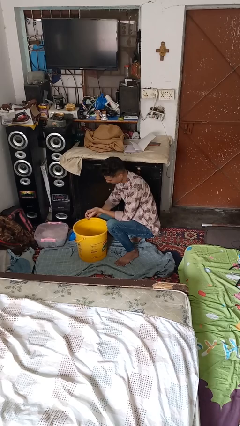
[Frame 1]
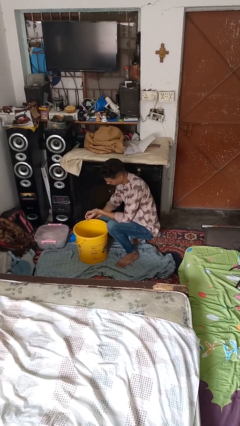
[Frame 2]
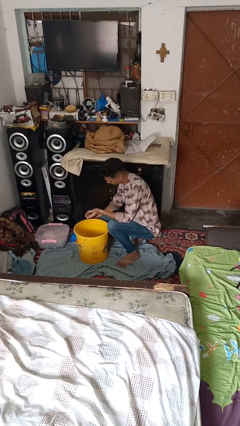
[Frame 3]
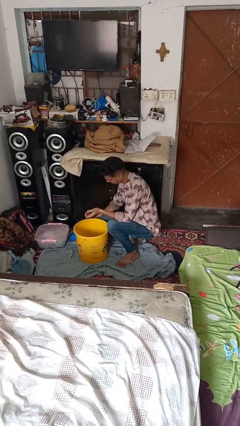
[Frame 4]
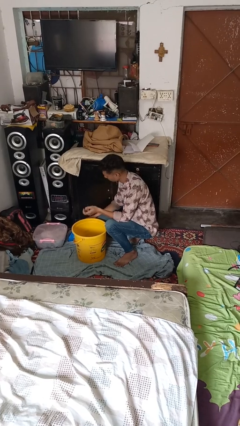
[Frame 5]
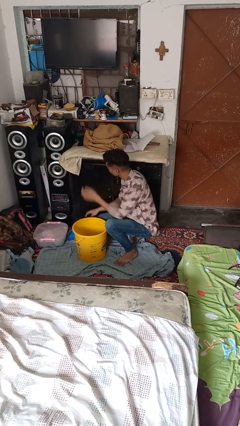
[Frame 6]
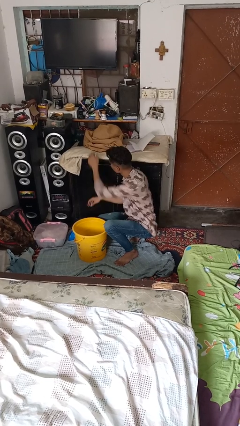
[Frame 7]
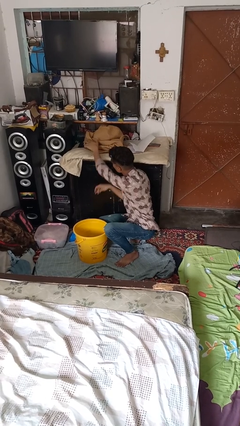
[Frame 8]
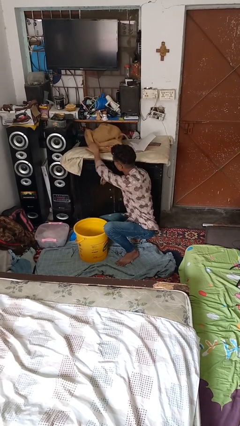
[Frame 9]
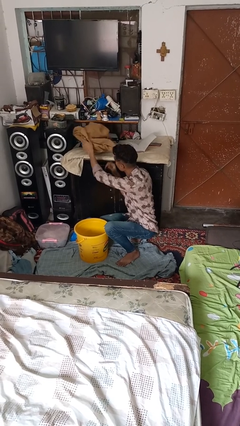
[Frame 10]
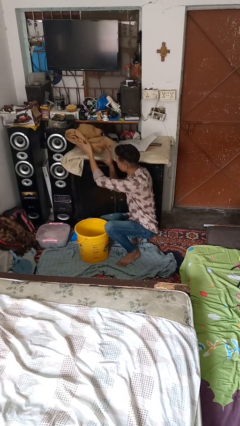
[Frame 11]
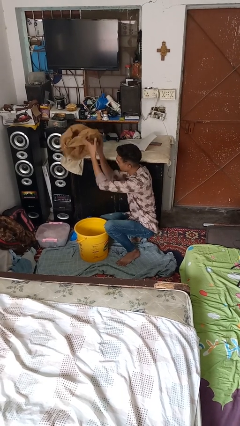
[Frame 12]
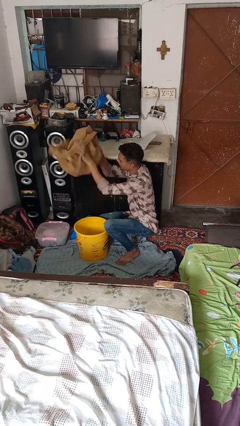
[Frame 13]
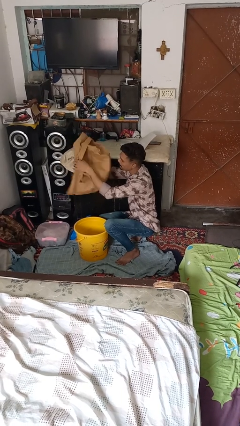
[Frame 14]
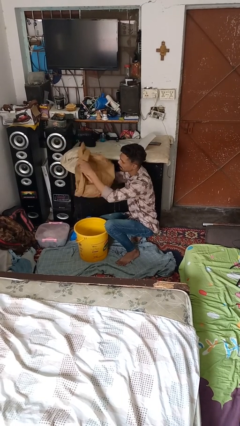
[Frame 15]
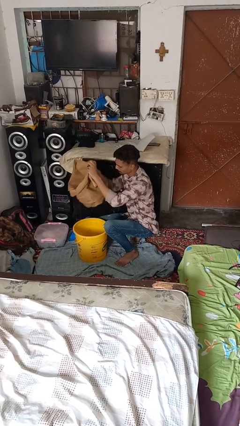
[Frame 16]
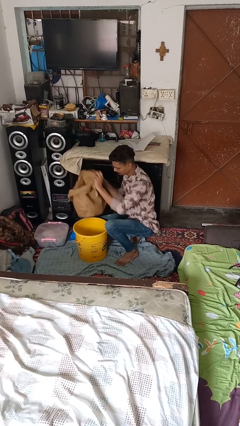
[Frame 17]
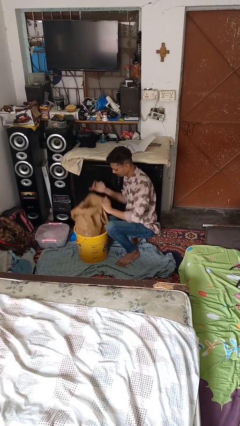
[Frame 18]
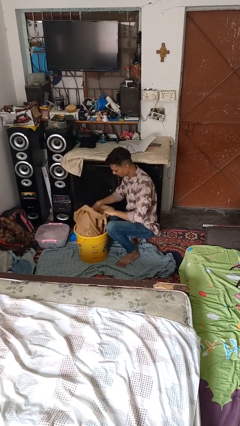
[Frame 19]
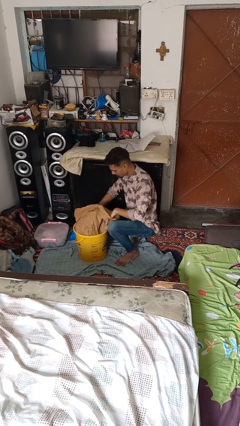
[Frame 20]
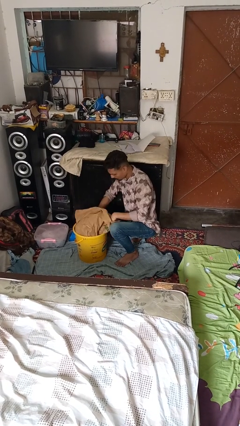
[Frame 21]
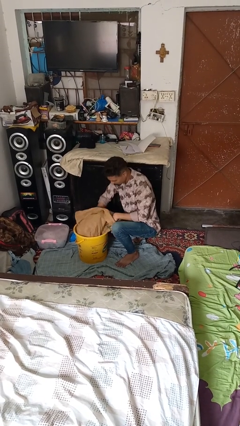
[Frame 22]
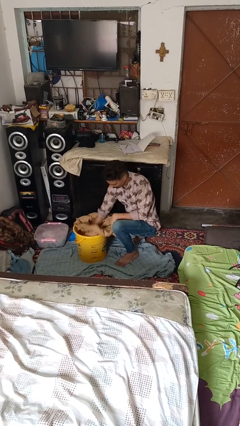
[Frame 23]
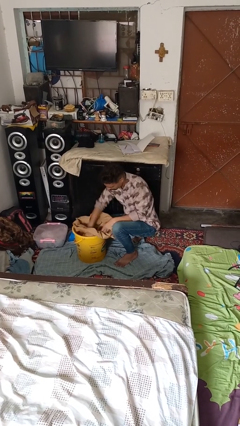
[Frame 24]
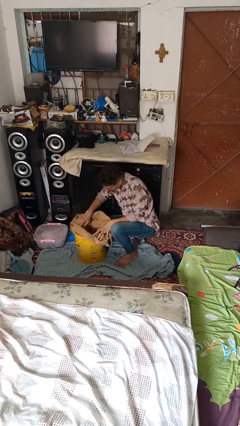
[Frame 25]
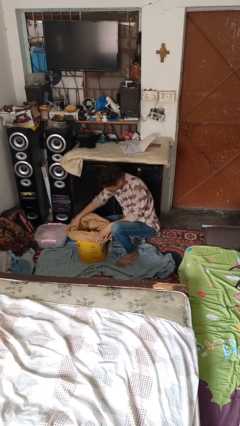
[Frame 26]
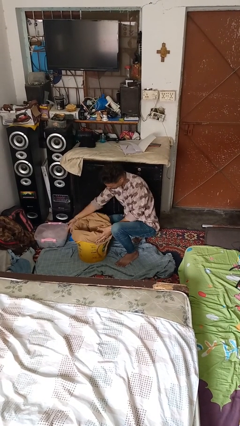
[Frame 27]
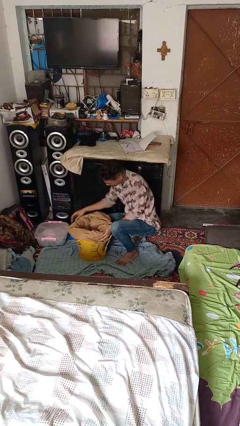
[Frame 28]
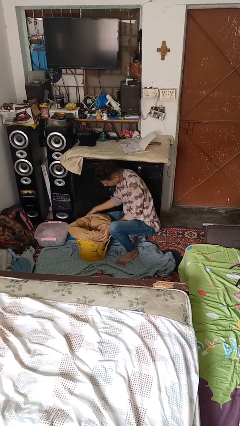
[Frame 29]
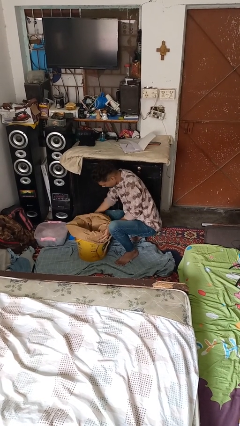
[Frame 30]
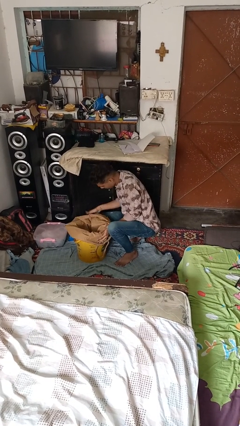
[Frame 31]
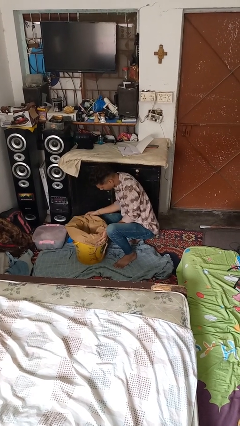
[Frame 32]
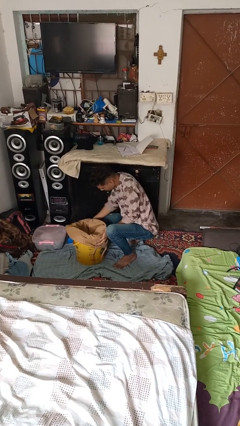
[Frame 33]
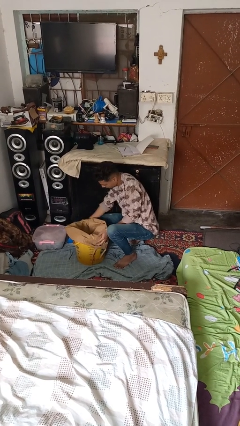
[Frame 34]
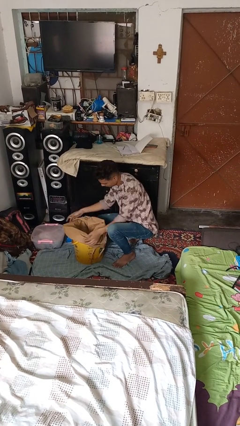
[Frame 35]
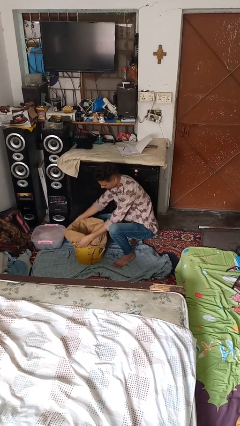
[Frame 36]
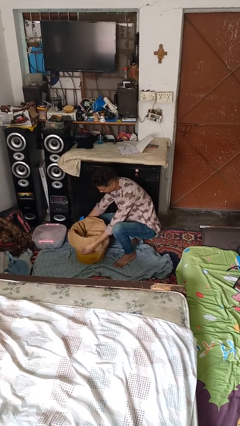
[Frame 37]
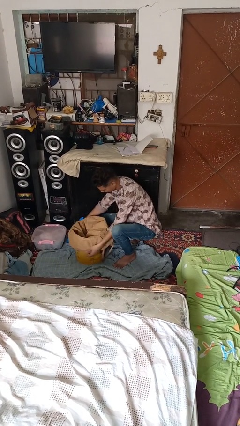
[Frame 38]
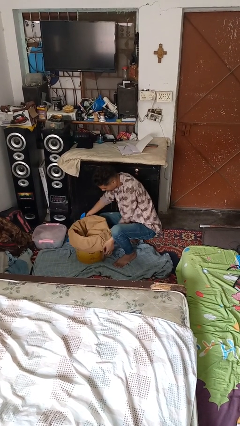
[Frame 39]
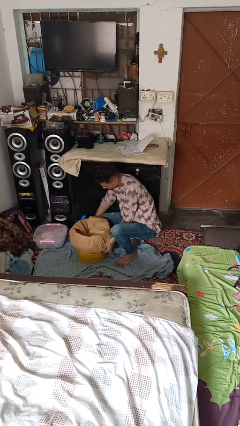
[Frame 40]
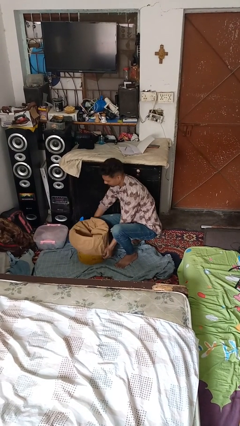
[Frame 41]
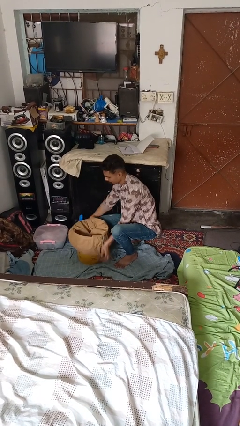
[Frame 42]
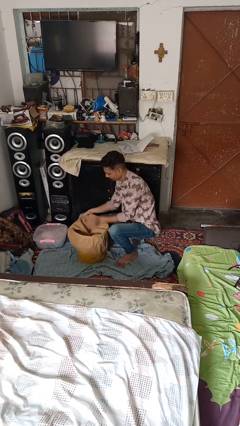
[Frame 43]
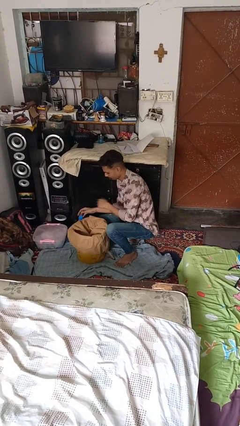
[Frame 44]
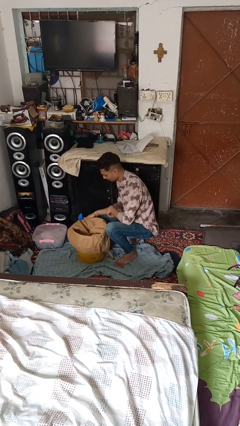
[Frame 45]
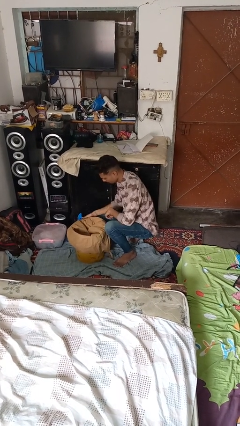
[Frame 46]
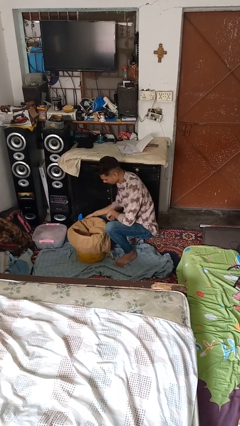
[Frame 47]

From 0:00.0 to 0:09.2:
person inserts trashbag into trashcan

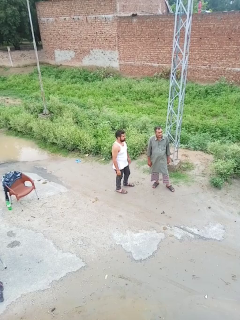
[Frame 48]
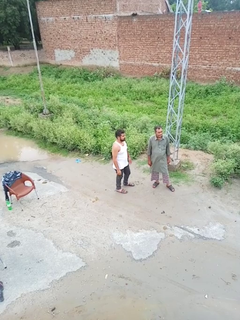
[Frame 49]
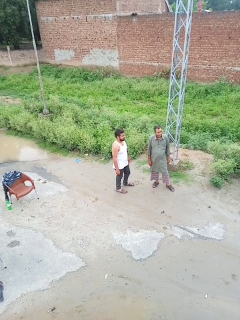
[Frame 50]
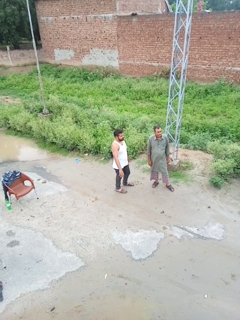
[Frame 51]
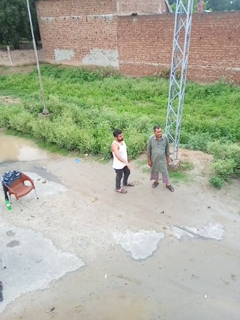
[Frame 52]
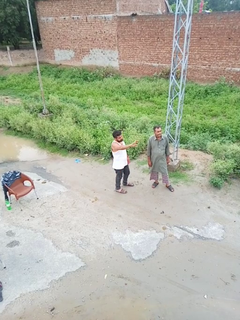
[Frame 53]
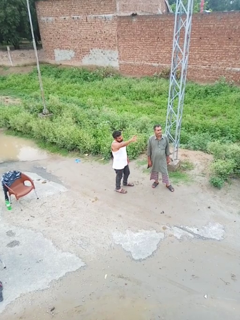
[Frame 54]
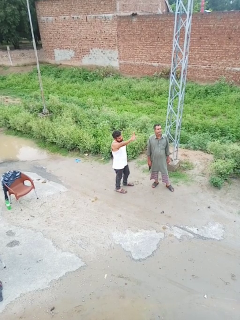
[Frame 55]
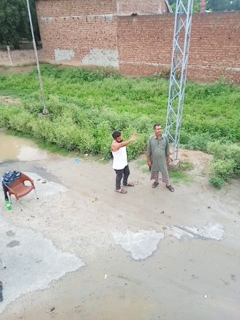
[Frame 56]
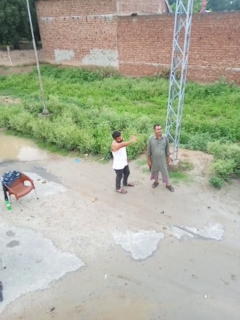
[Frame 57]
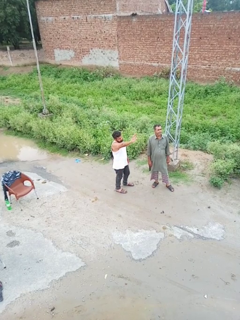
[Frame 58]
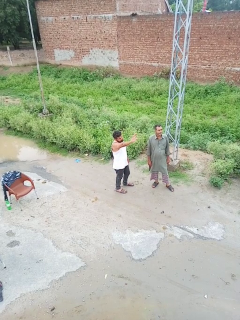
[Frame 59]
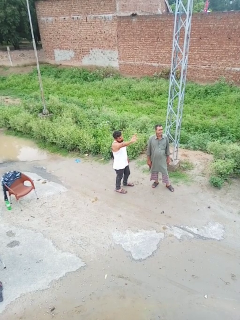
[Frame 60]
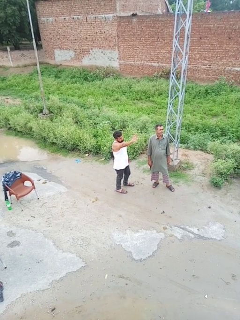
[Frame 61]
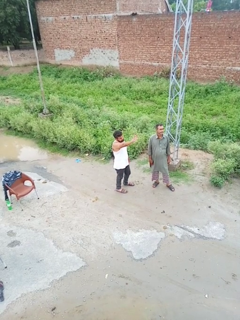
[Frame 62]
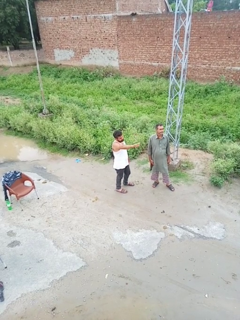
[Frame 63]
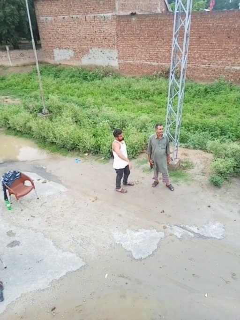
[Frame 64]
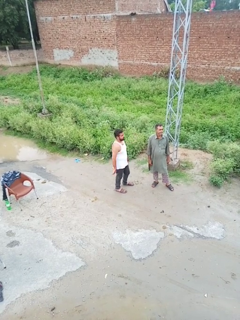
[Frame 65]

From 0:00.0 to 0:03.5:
person waves at person

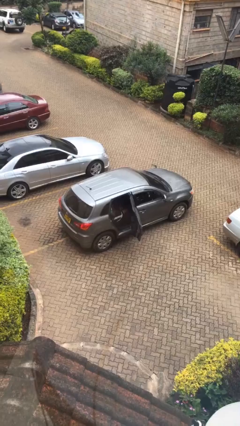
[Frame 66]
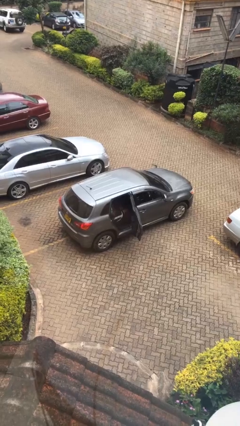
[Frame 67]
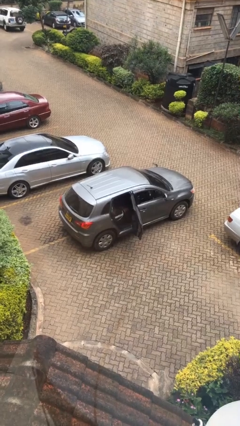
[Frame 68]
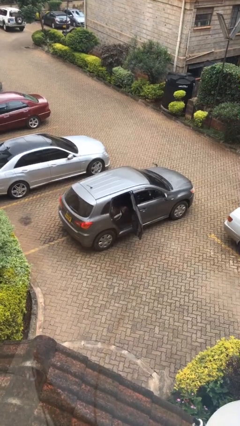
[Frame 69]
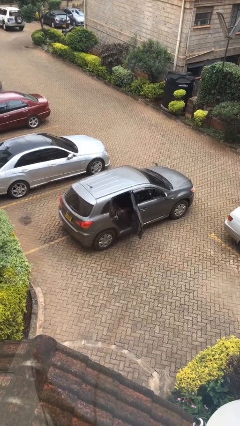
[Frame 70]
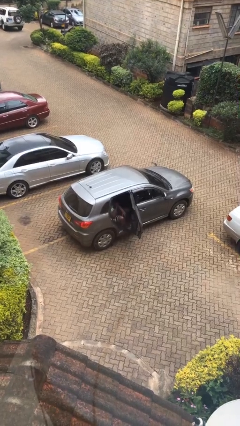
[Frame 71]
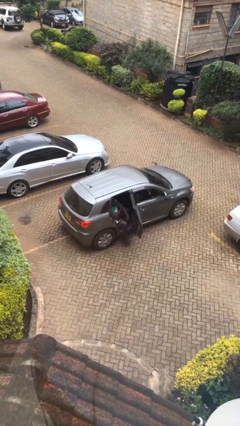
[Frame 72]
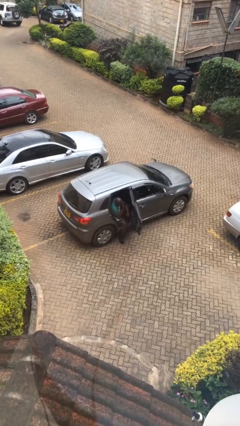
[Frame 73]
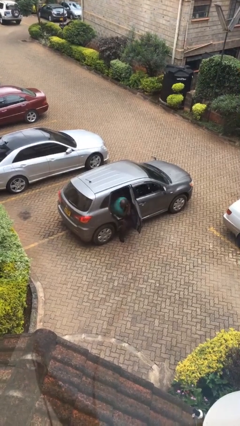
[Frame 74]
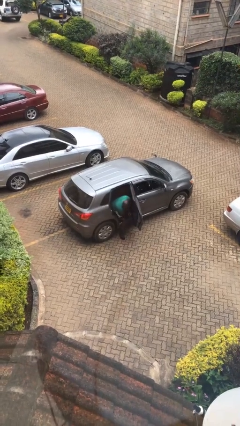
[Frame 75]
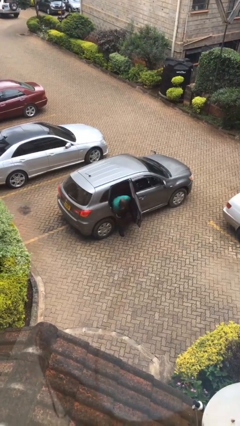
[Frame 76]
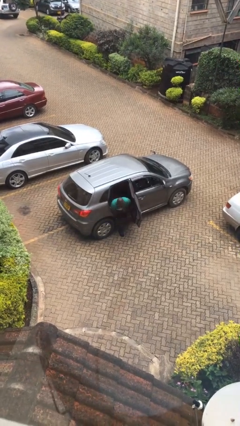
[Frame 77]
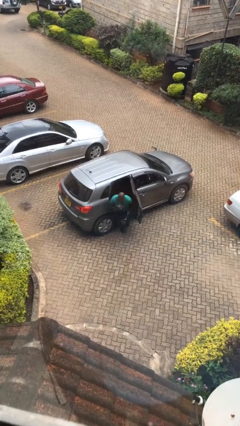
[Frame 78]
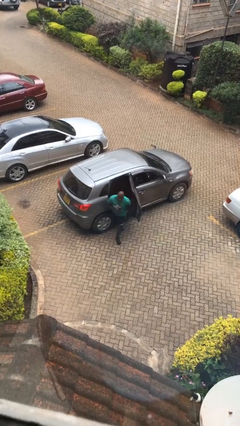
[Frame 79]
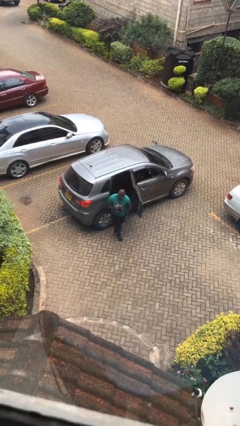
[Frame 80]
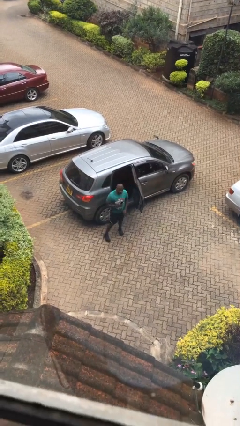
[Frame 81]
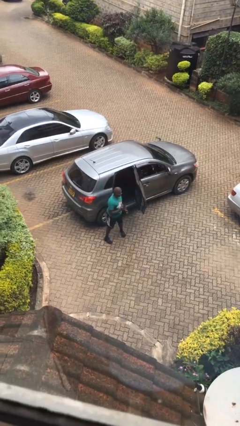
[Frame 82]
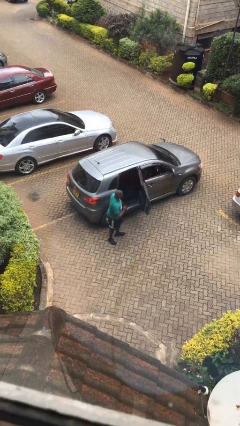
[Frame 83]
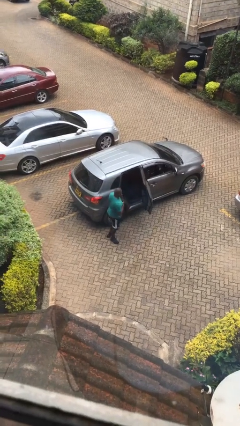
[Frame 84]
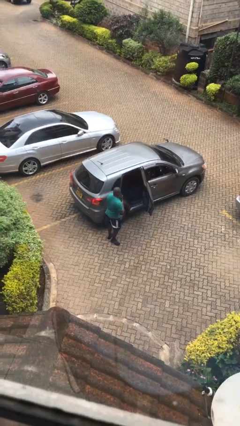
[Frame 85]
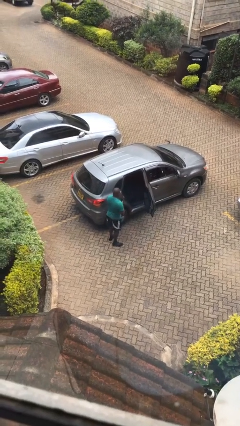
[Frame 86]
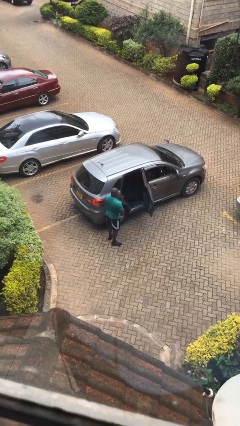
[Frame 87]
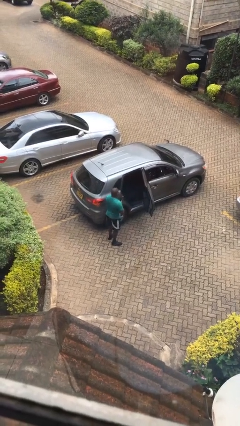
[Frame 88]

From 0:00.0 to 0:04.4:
person exits car

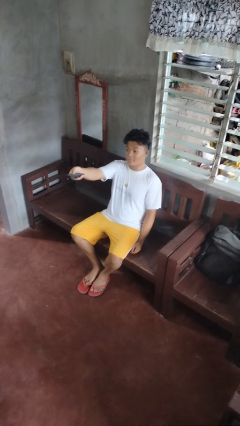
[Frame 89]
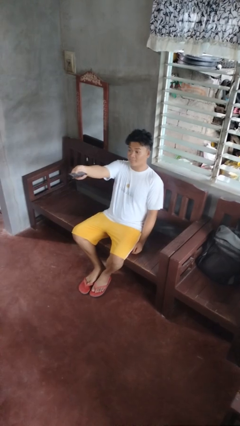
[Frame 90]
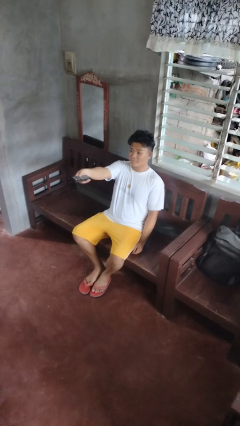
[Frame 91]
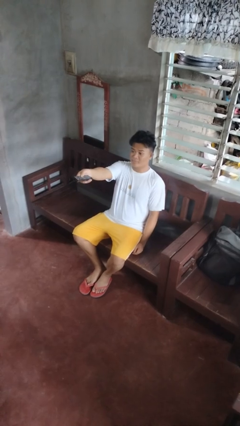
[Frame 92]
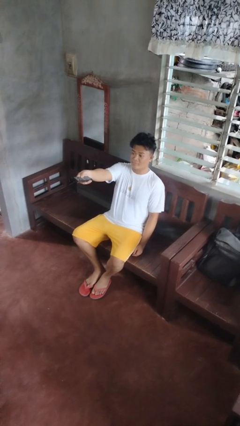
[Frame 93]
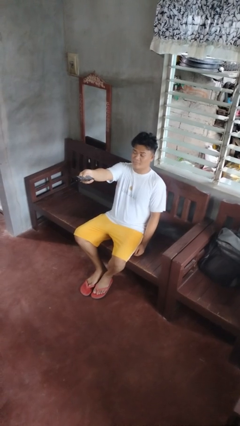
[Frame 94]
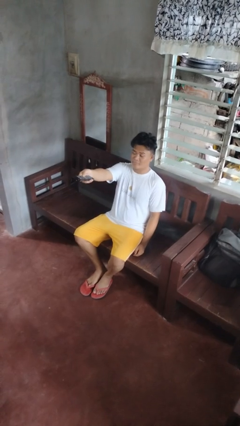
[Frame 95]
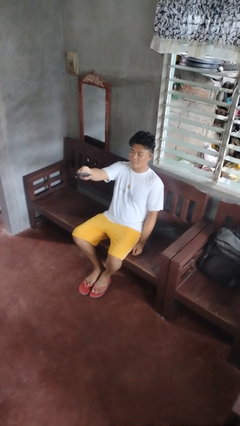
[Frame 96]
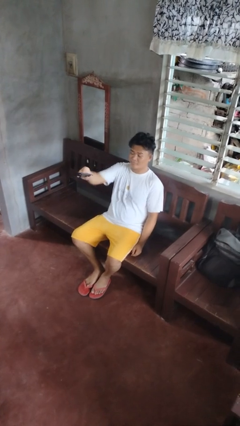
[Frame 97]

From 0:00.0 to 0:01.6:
person uses television remote
